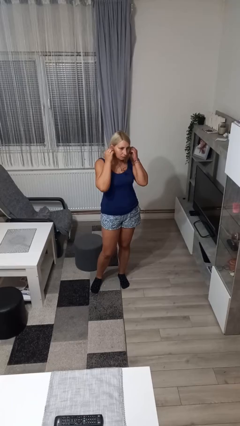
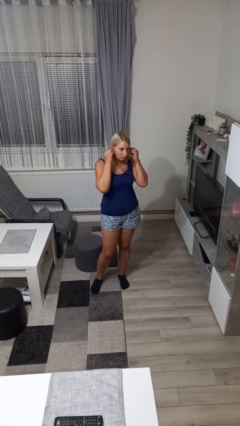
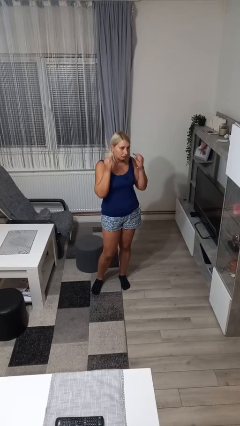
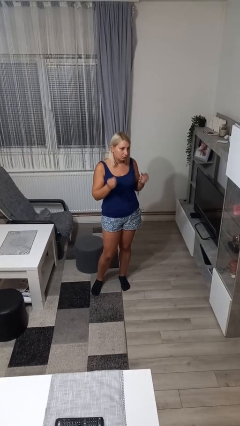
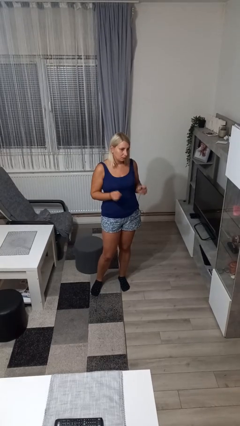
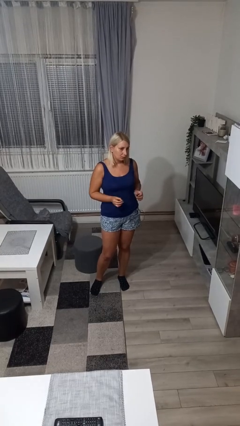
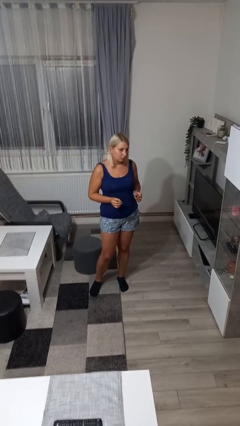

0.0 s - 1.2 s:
person takes off headphones

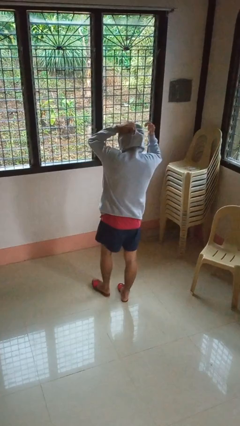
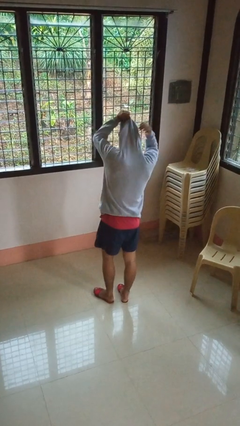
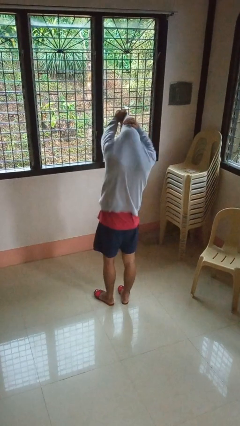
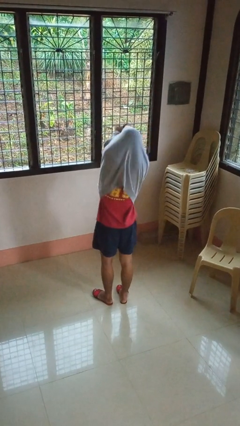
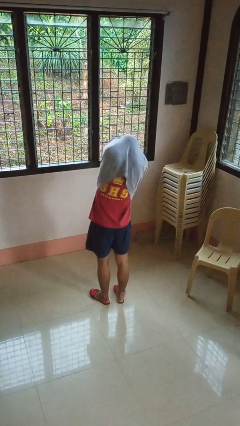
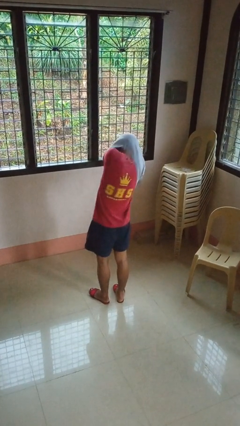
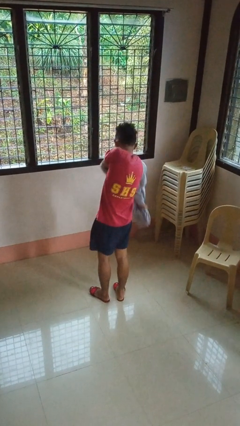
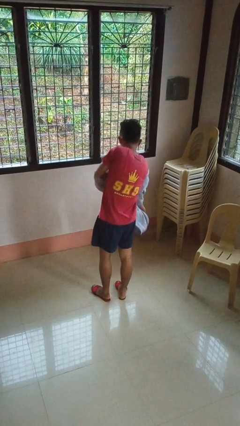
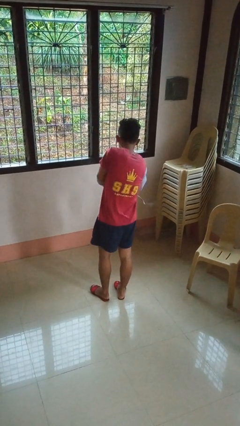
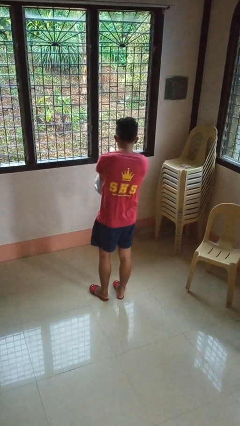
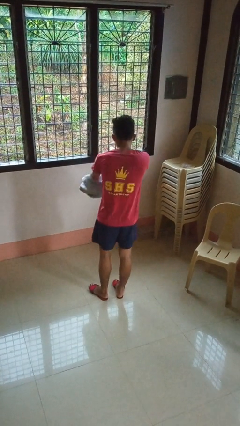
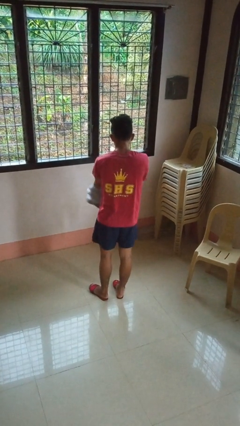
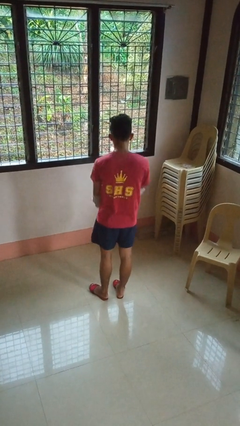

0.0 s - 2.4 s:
person takes off hoodie

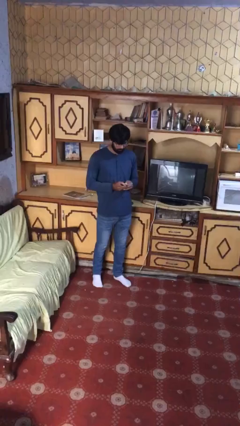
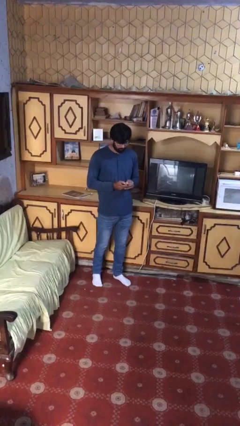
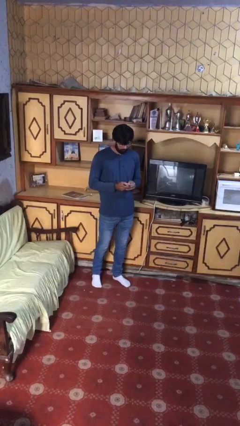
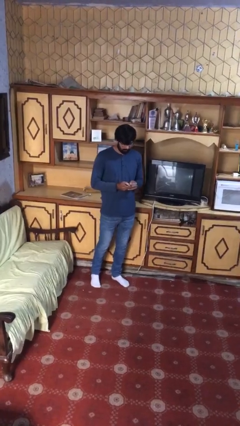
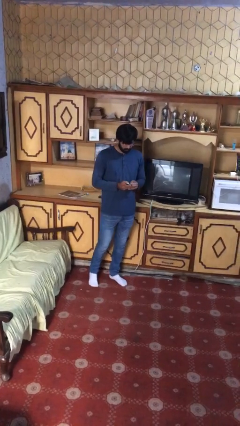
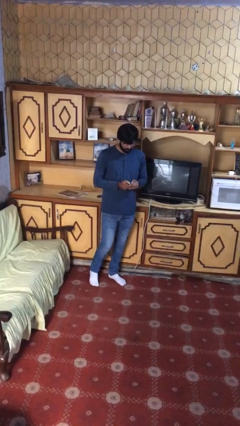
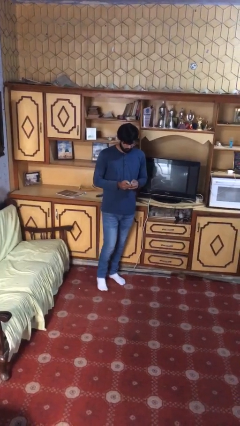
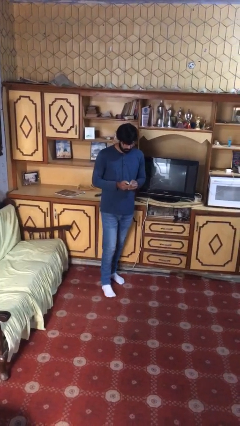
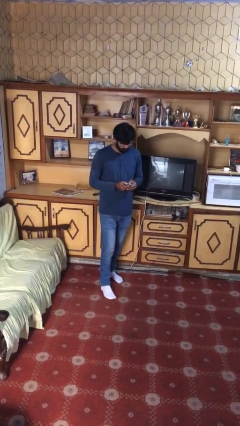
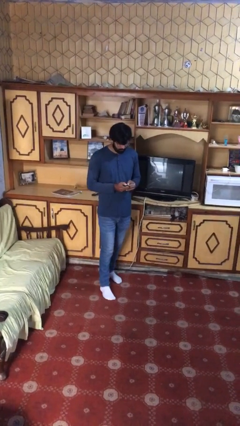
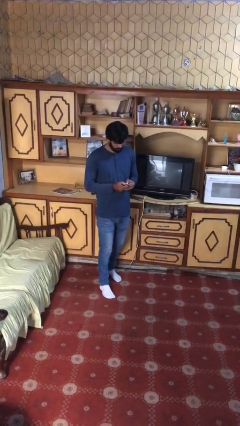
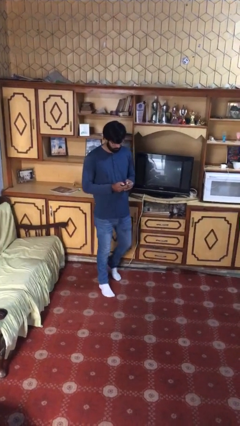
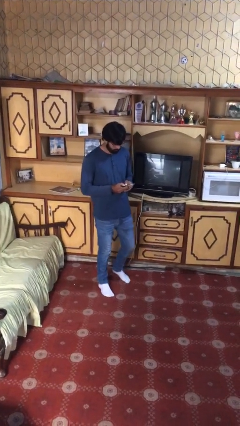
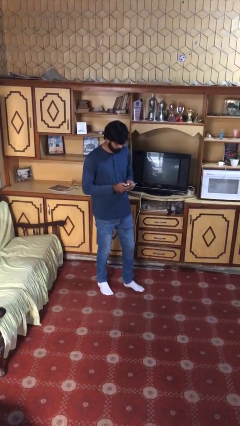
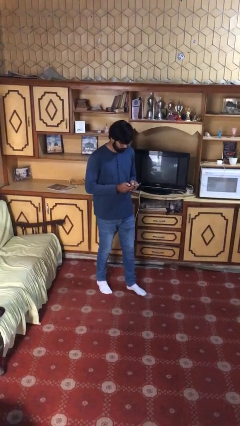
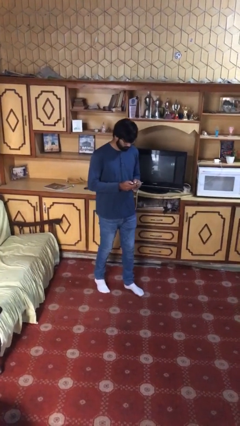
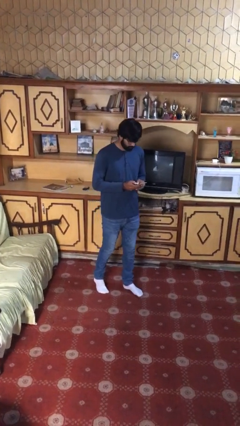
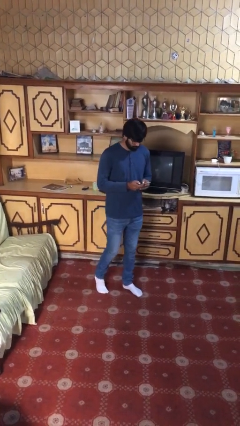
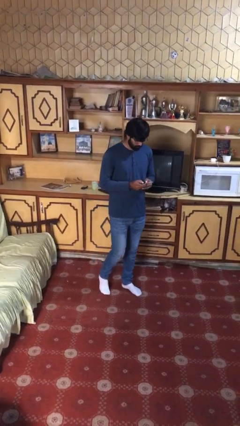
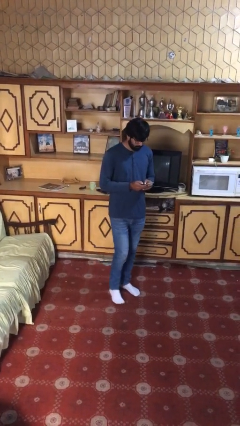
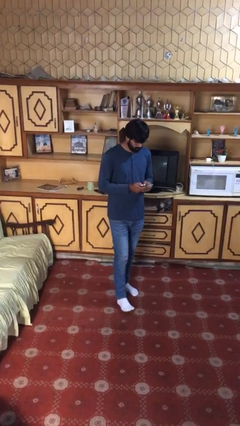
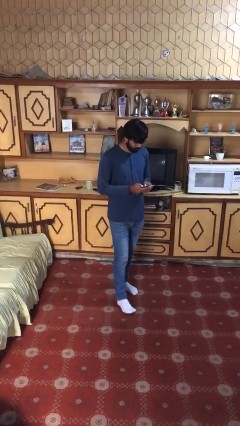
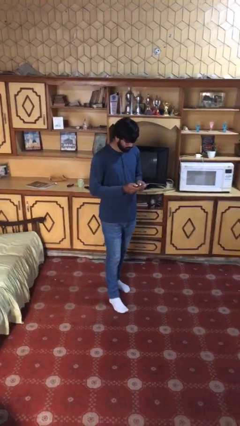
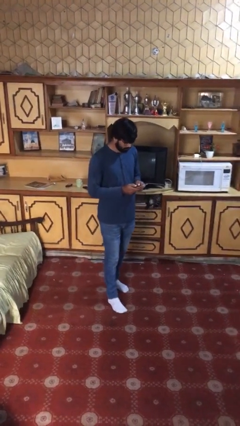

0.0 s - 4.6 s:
person texts on phone

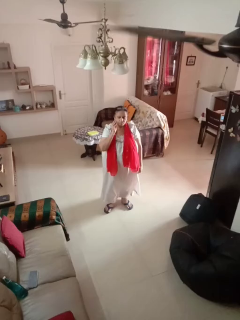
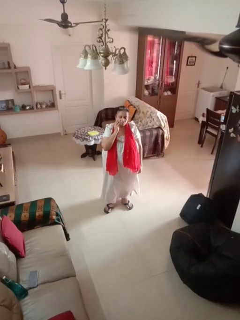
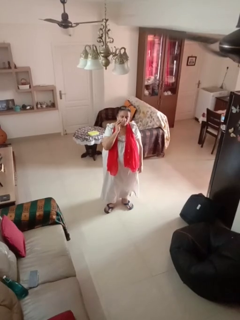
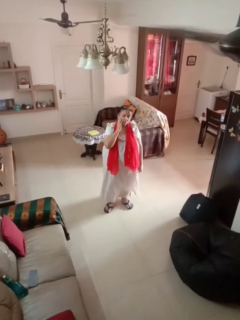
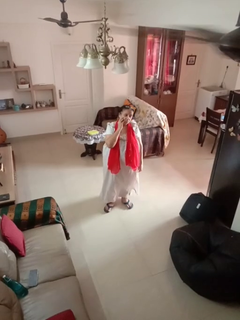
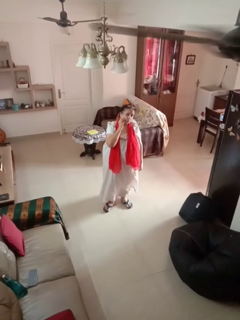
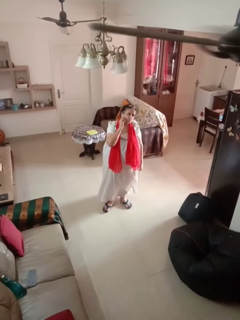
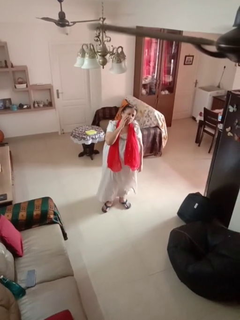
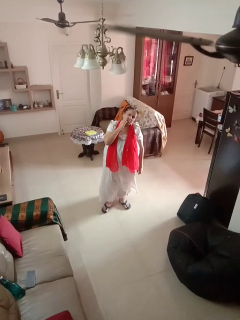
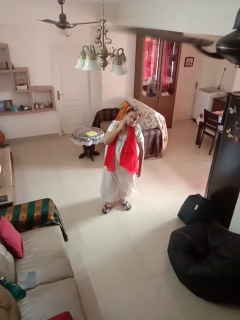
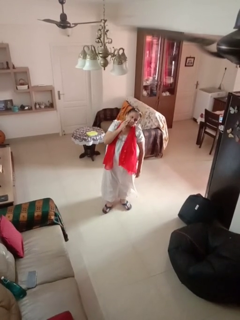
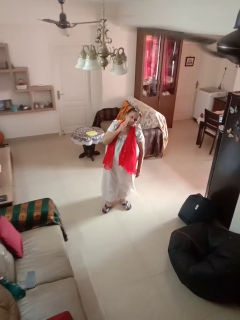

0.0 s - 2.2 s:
person scratches face

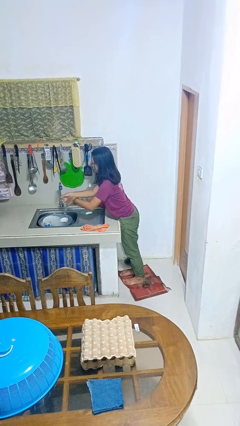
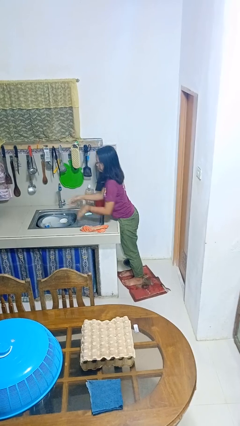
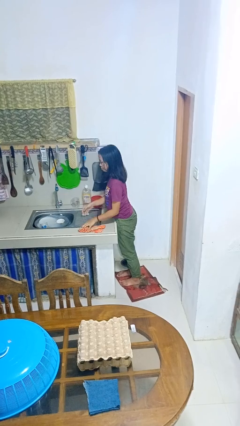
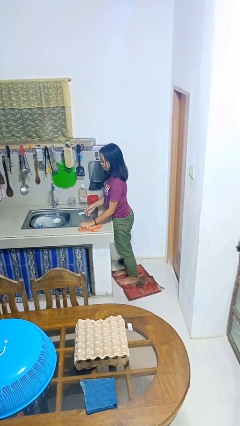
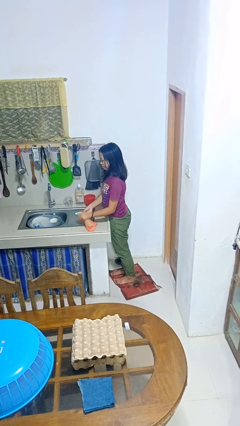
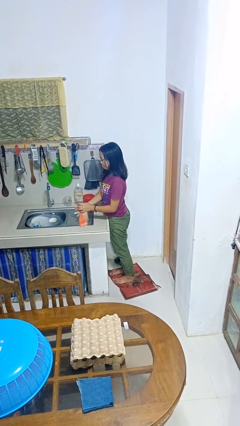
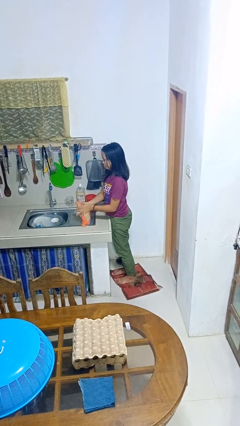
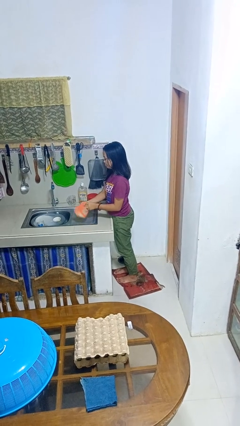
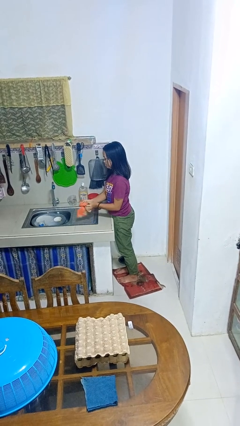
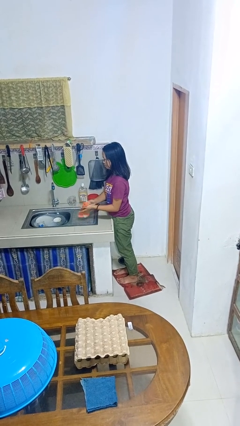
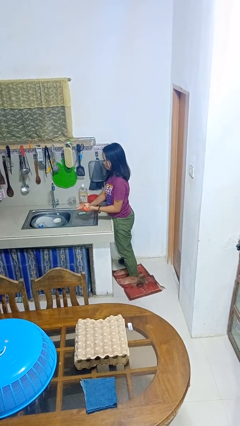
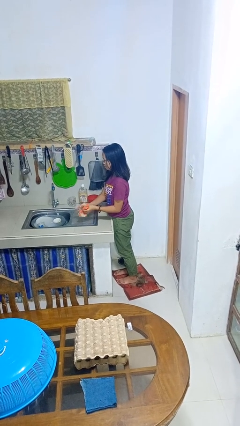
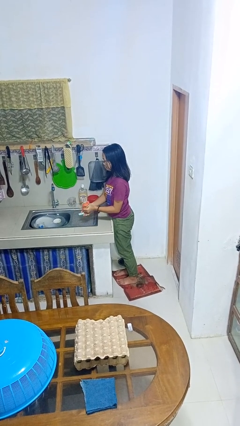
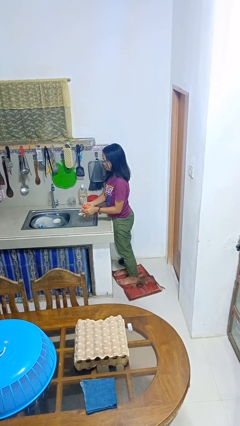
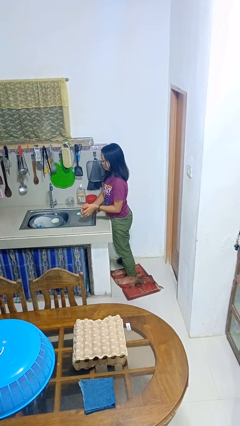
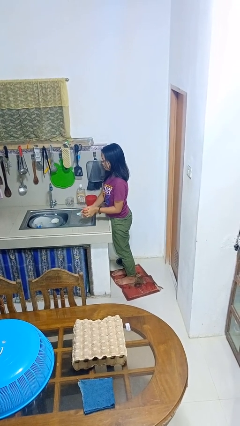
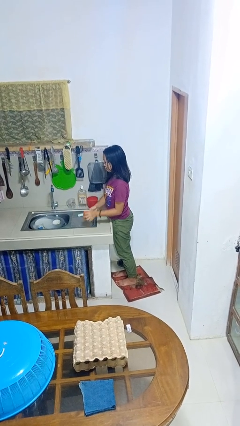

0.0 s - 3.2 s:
person dries hands with towel

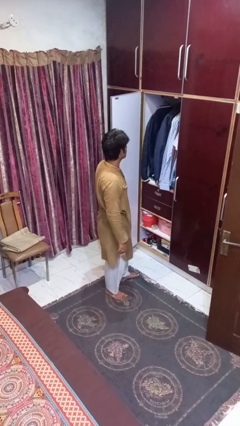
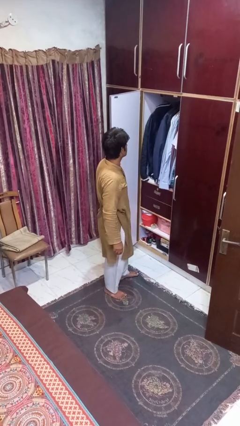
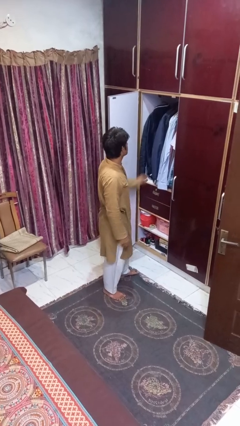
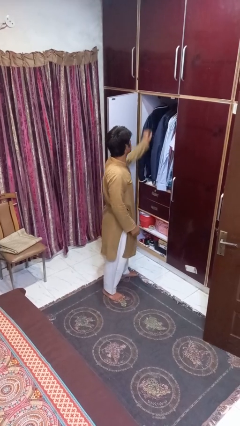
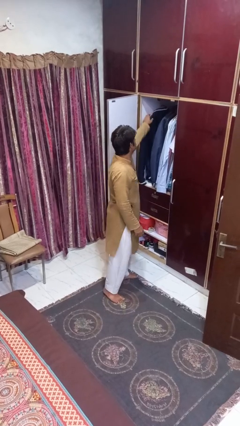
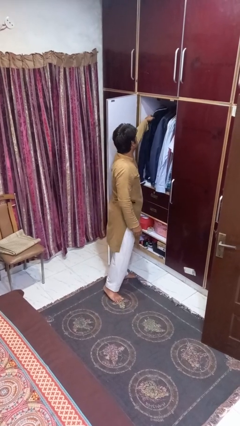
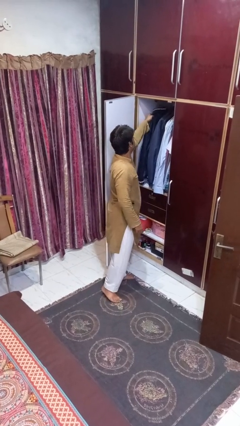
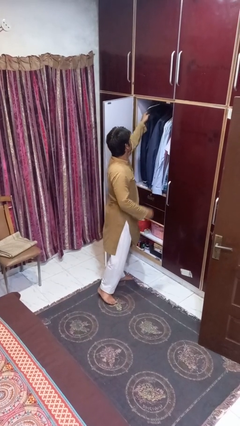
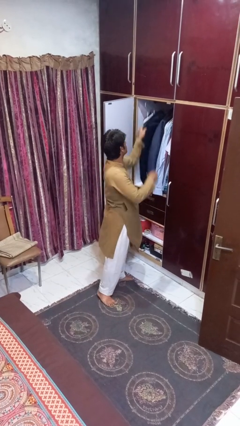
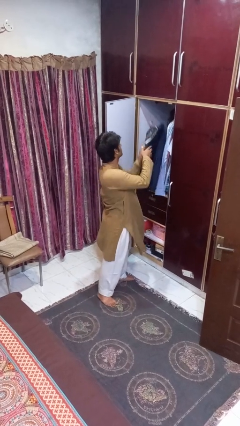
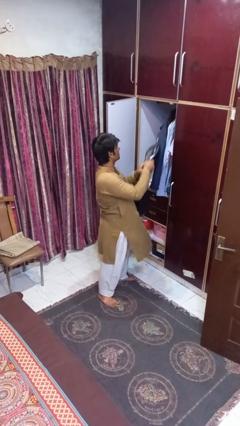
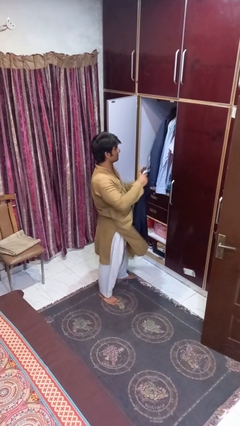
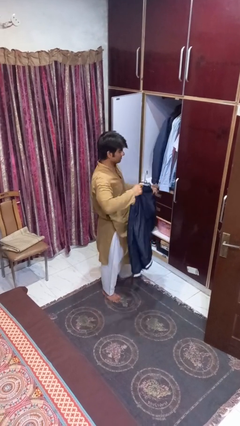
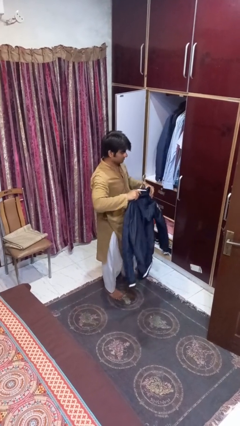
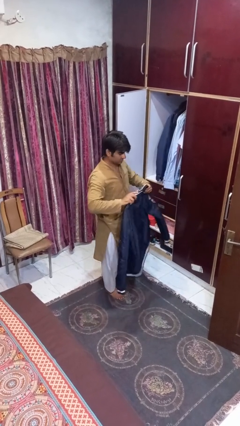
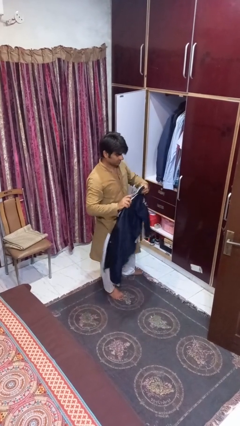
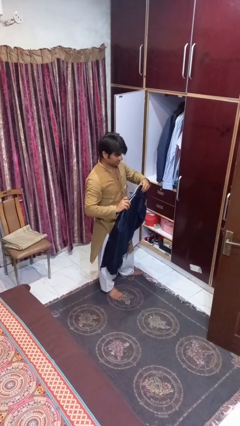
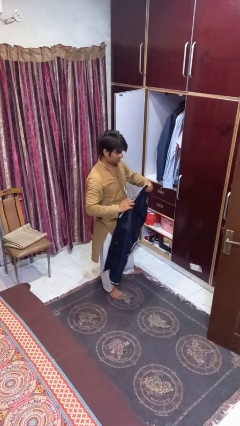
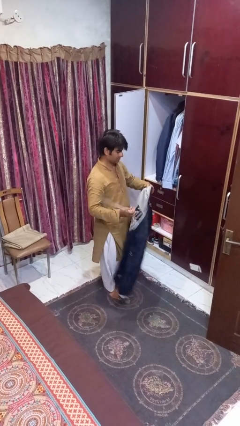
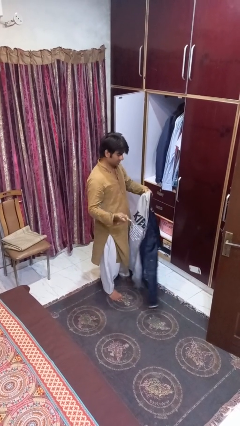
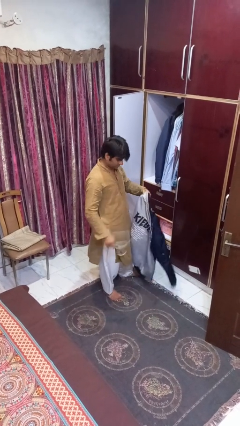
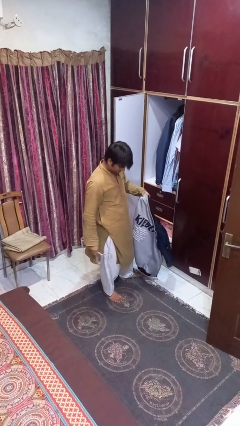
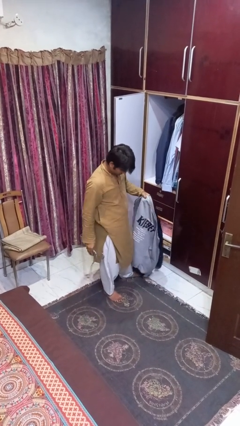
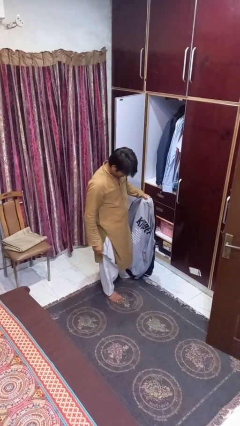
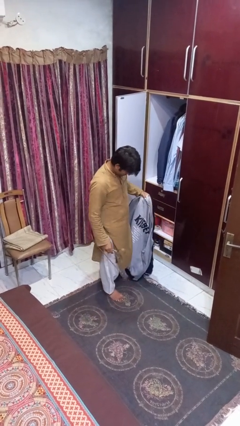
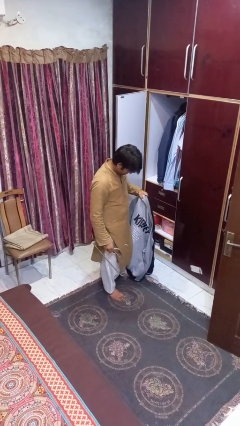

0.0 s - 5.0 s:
person takes clothes from closet
